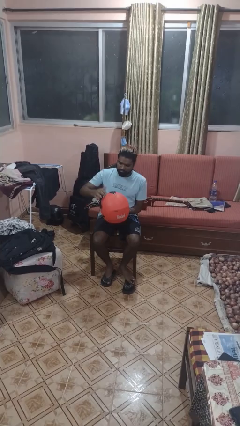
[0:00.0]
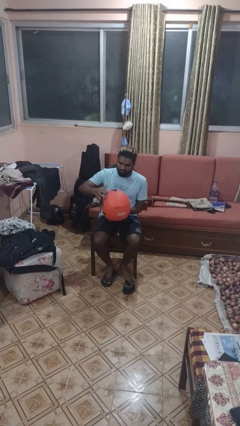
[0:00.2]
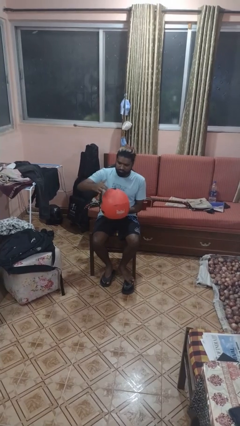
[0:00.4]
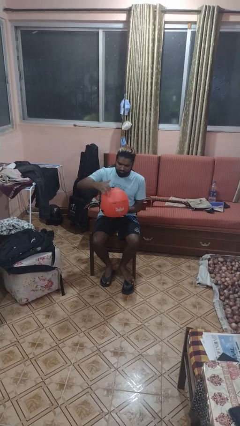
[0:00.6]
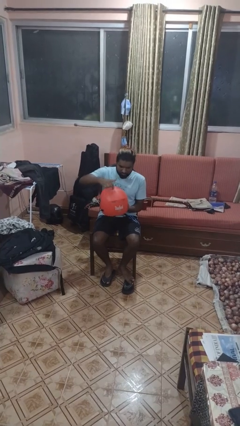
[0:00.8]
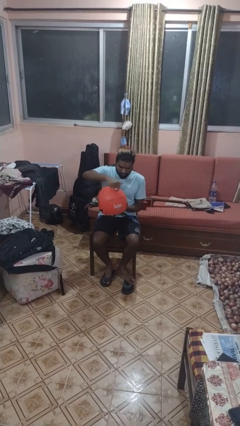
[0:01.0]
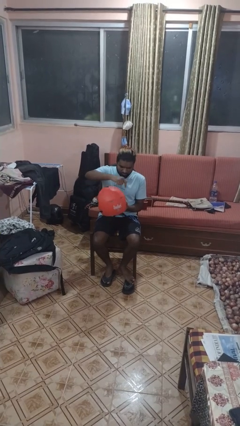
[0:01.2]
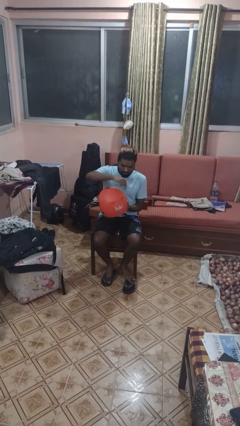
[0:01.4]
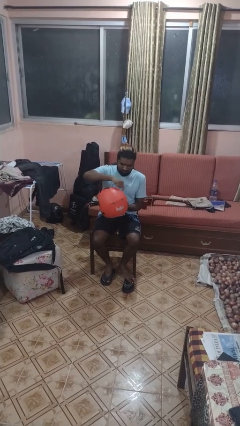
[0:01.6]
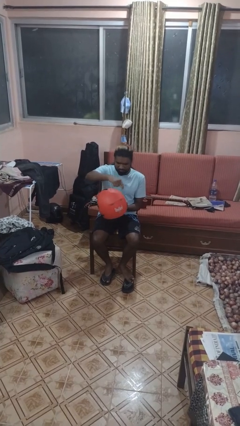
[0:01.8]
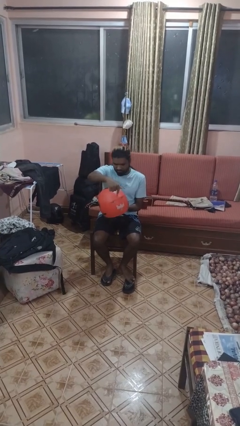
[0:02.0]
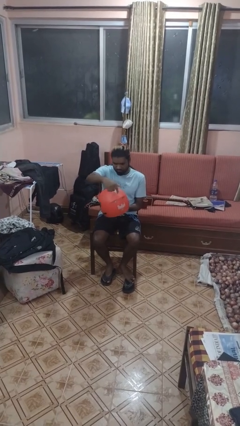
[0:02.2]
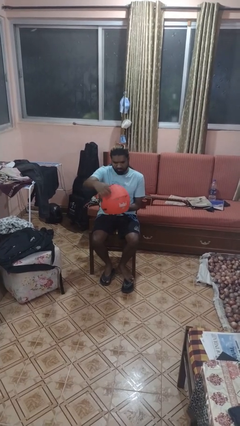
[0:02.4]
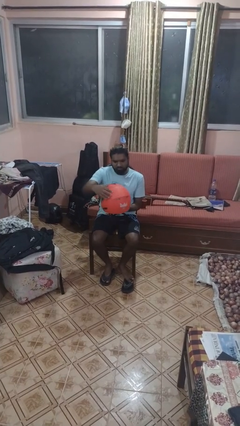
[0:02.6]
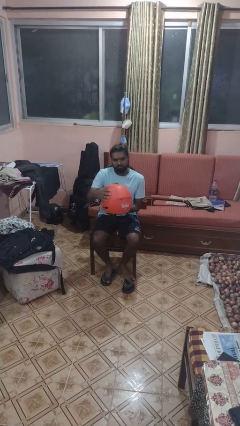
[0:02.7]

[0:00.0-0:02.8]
person taps object with finger

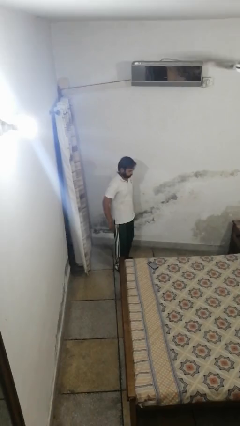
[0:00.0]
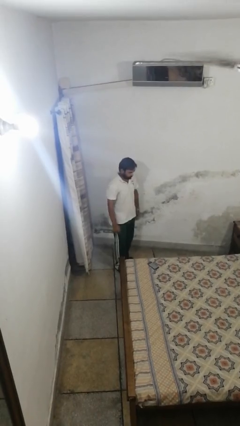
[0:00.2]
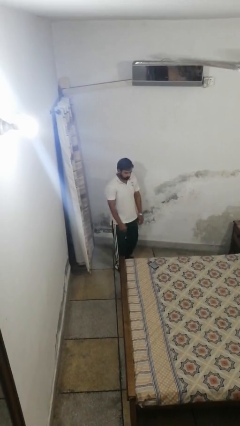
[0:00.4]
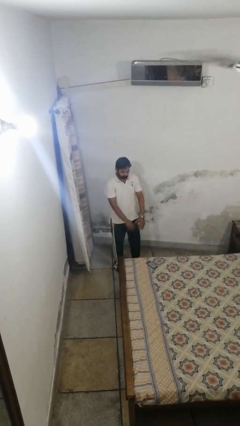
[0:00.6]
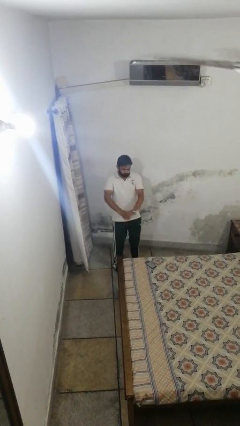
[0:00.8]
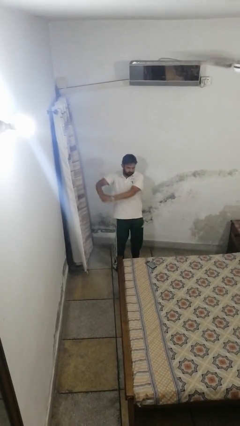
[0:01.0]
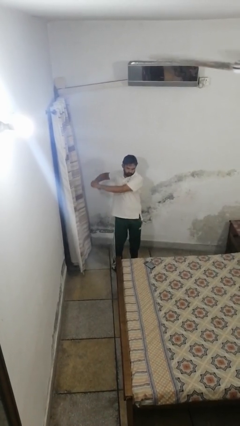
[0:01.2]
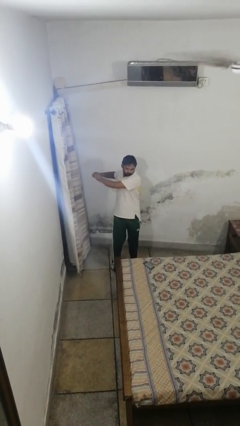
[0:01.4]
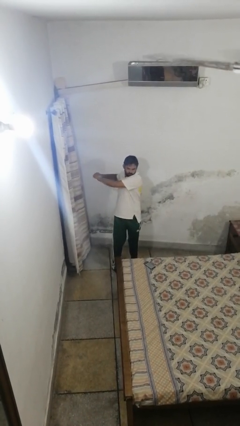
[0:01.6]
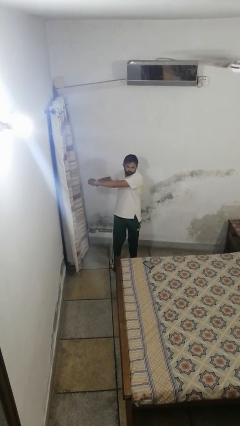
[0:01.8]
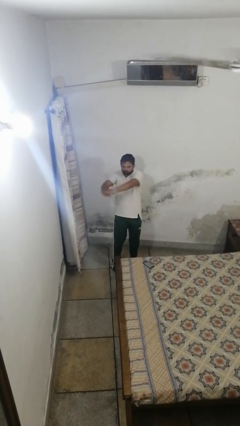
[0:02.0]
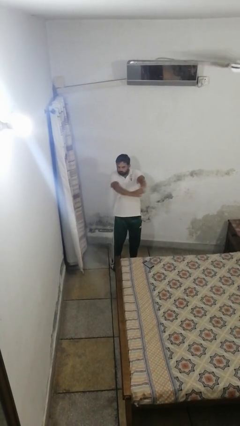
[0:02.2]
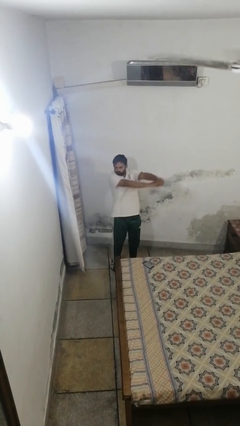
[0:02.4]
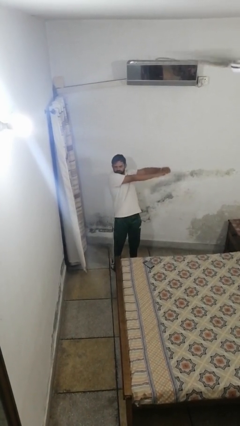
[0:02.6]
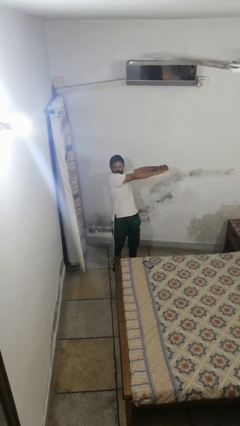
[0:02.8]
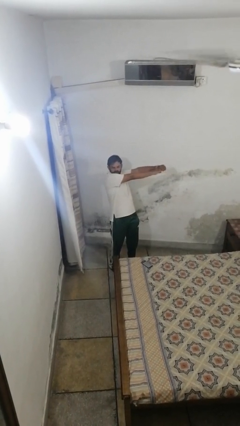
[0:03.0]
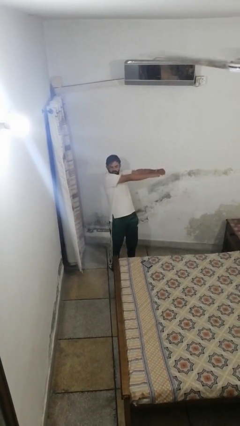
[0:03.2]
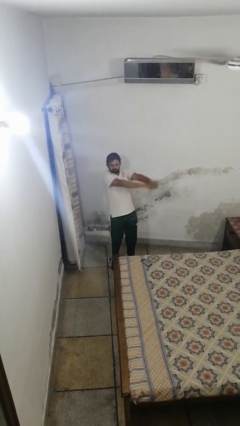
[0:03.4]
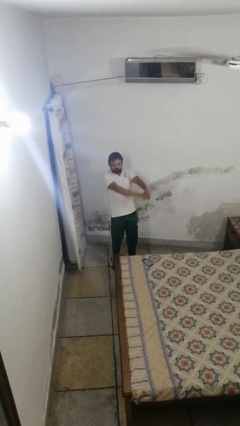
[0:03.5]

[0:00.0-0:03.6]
person stretches arms to side

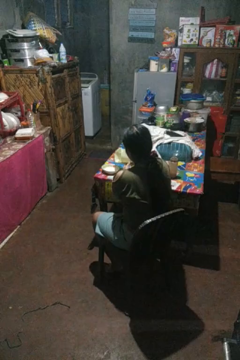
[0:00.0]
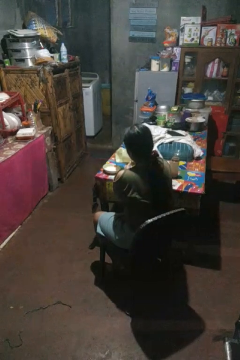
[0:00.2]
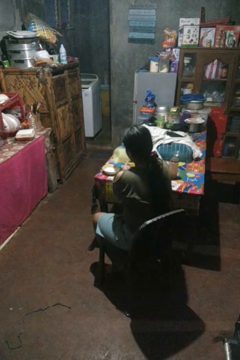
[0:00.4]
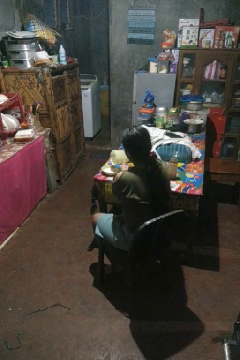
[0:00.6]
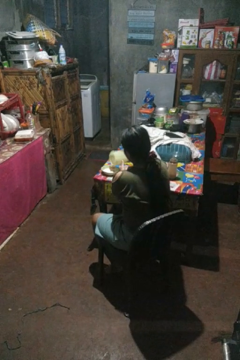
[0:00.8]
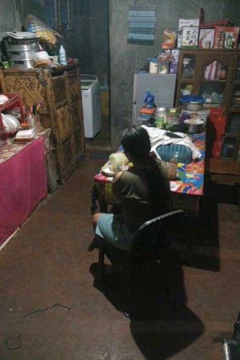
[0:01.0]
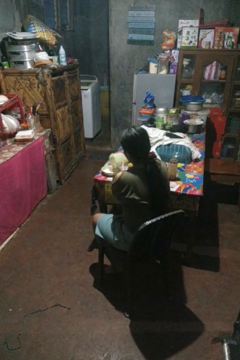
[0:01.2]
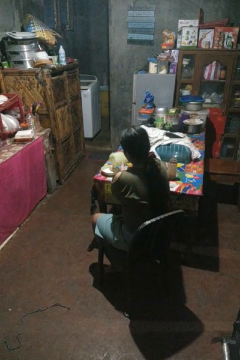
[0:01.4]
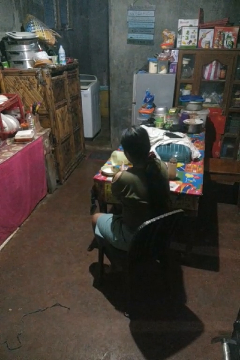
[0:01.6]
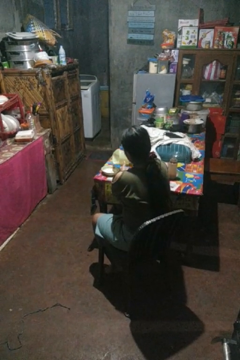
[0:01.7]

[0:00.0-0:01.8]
person pours into bowl

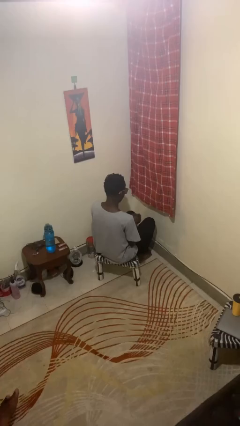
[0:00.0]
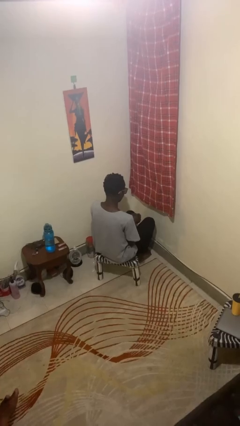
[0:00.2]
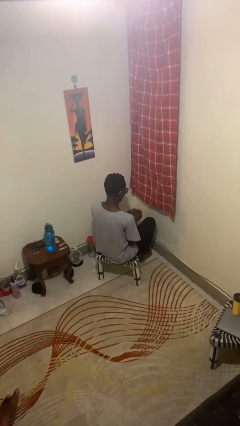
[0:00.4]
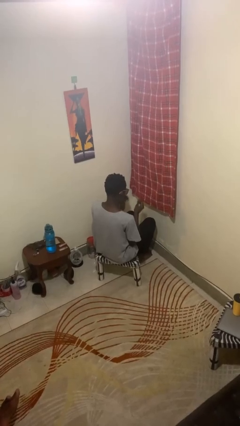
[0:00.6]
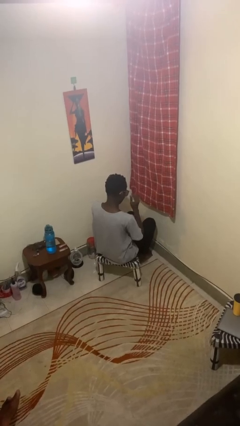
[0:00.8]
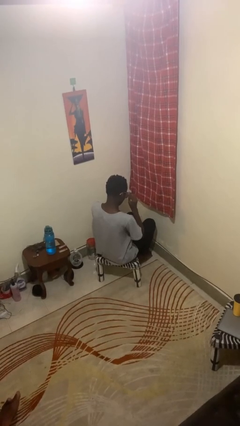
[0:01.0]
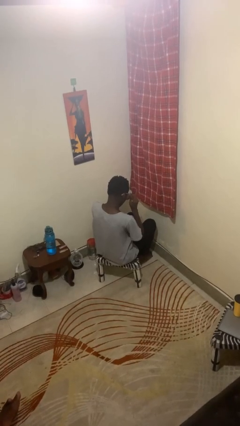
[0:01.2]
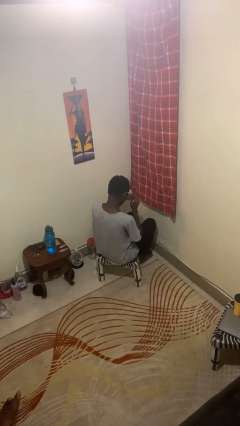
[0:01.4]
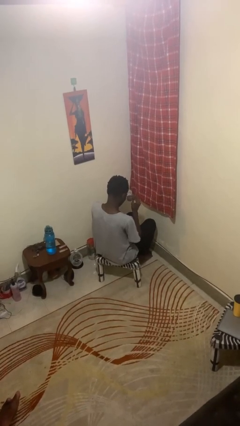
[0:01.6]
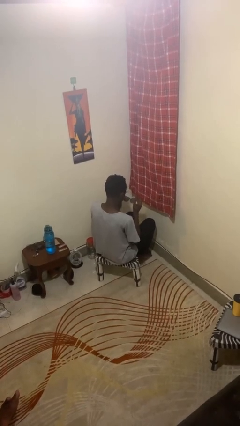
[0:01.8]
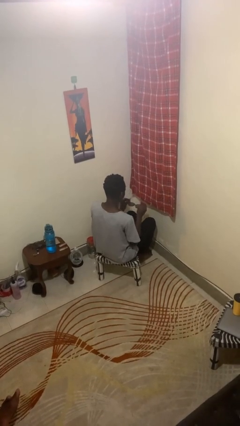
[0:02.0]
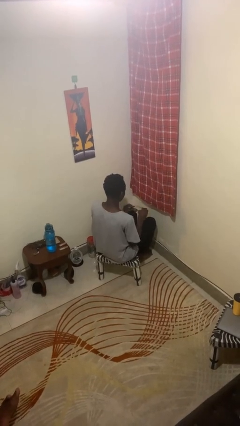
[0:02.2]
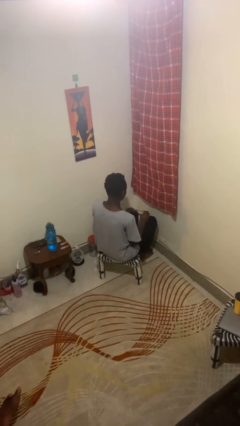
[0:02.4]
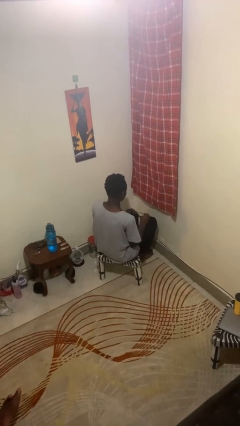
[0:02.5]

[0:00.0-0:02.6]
person takes off glasses

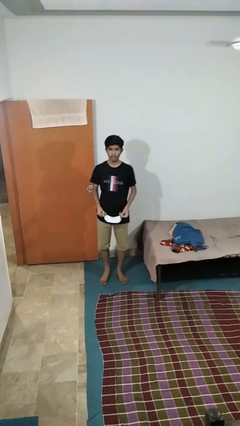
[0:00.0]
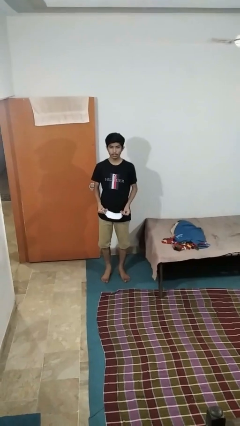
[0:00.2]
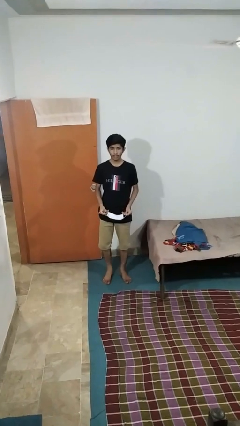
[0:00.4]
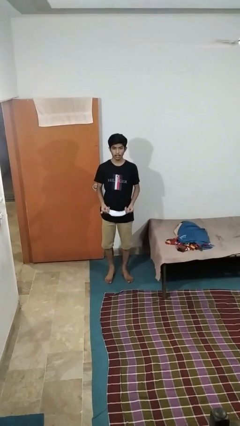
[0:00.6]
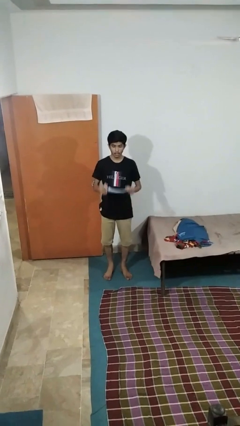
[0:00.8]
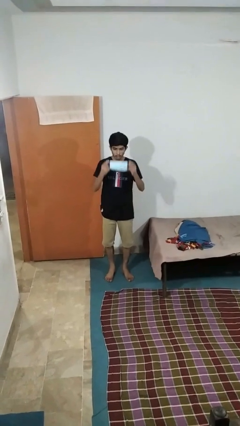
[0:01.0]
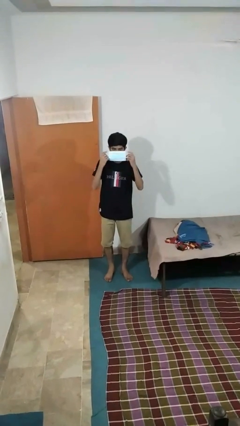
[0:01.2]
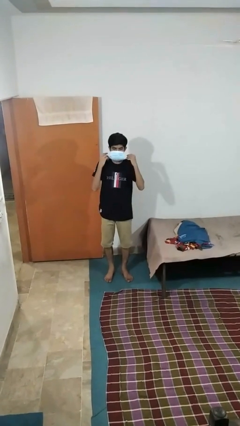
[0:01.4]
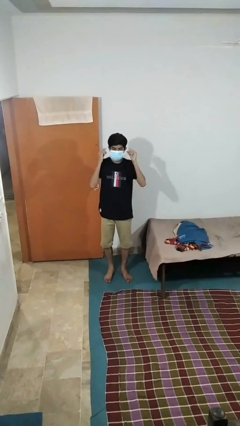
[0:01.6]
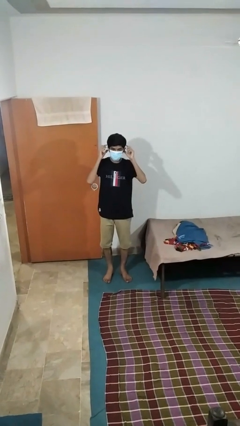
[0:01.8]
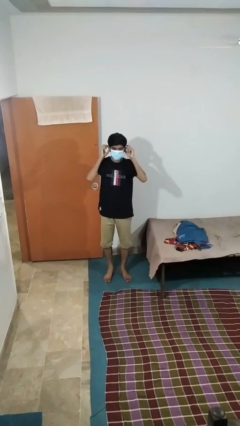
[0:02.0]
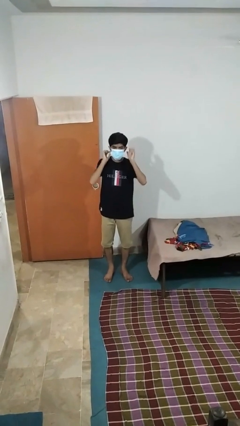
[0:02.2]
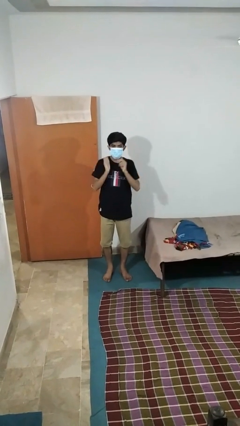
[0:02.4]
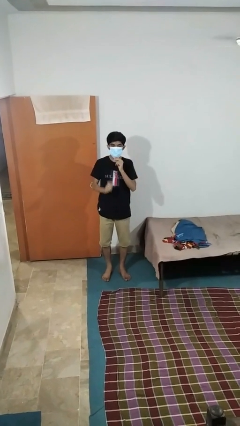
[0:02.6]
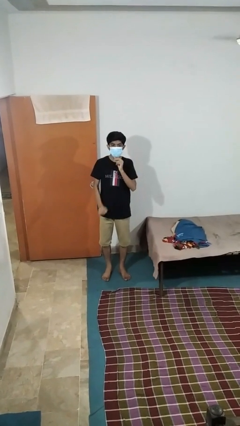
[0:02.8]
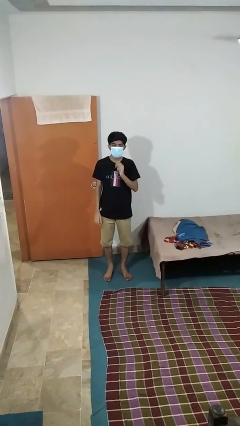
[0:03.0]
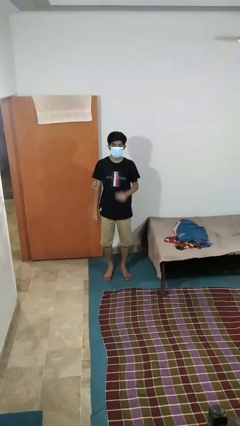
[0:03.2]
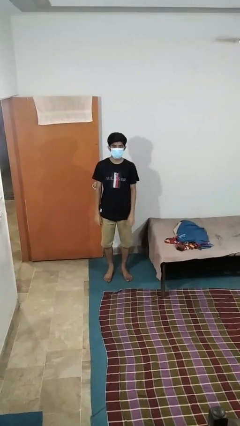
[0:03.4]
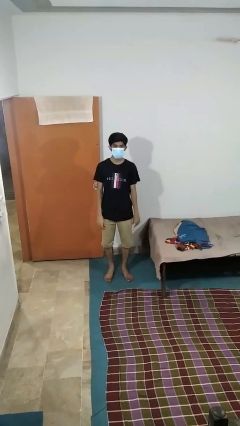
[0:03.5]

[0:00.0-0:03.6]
person puts on facemask

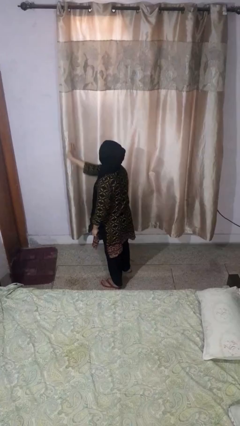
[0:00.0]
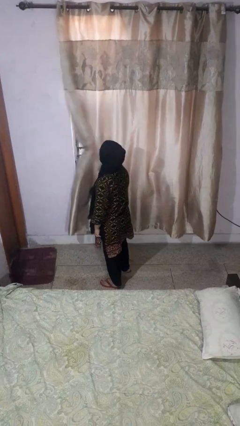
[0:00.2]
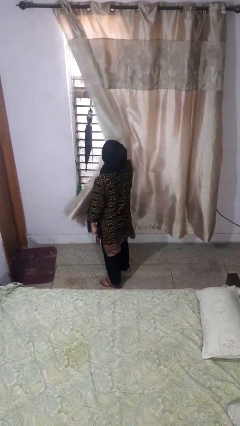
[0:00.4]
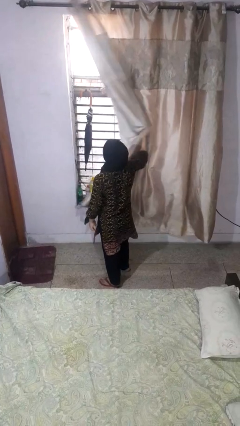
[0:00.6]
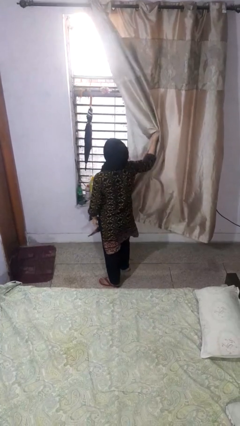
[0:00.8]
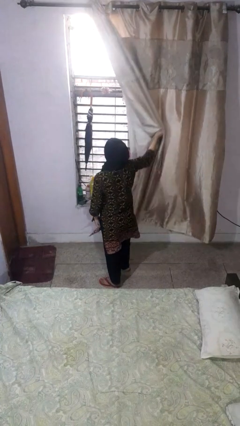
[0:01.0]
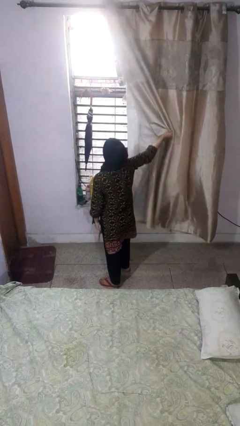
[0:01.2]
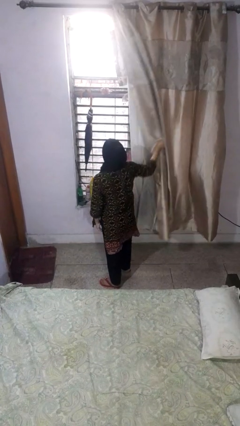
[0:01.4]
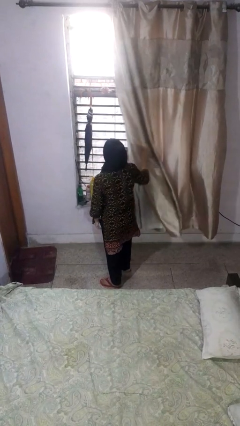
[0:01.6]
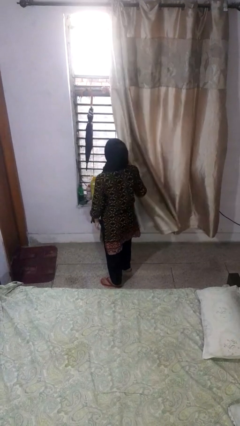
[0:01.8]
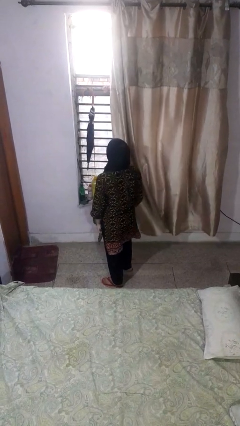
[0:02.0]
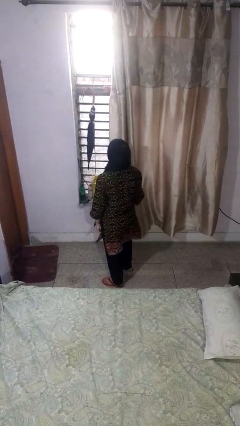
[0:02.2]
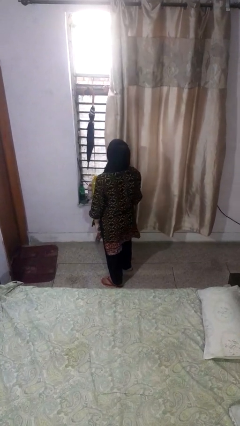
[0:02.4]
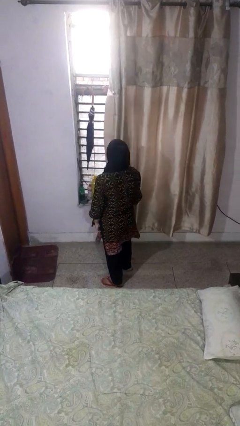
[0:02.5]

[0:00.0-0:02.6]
person opens curtains

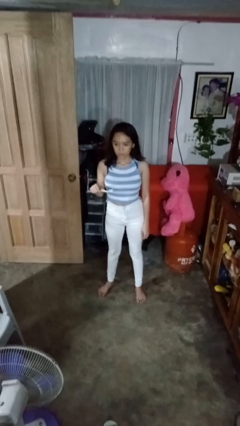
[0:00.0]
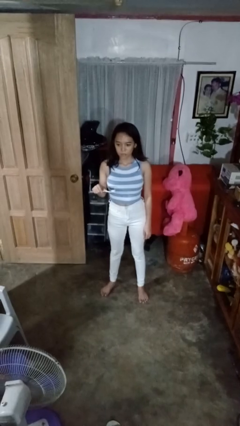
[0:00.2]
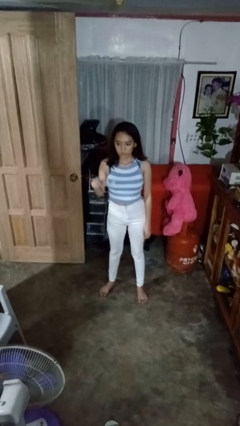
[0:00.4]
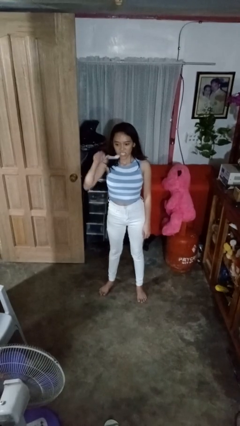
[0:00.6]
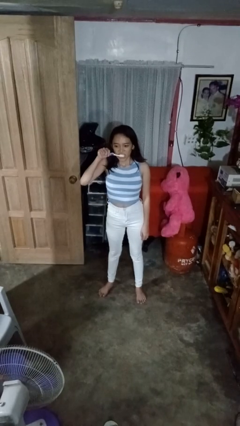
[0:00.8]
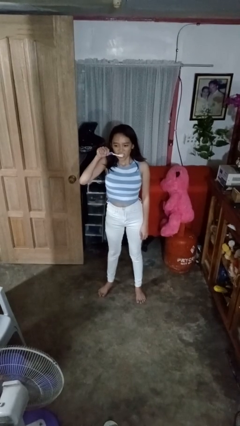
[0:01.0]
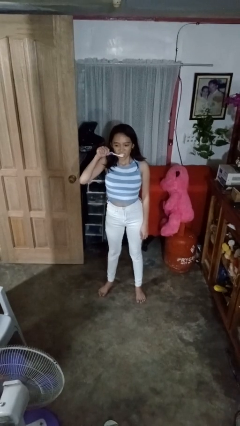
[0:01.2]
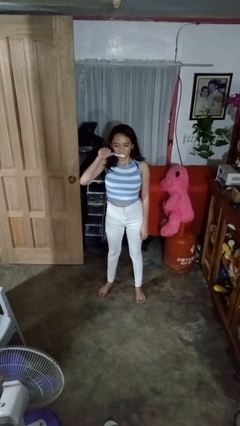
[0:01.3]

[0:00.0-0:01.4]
person brushes teeth
